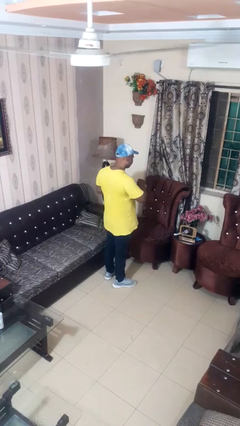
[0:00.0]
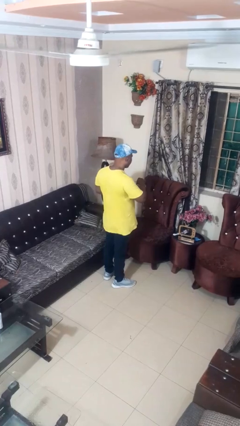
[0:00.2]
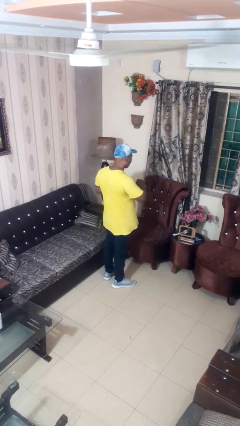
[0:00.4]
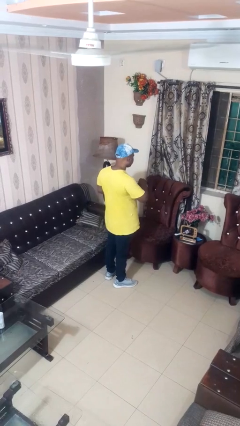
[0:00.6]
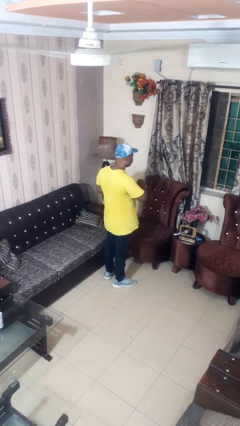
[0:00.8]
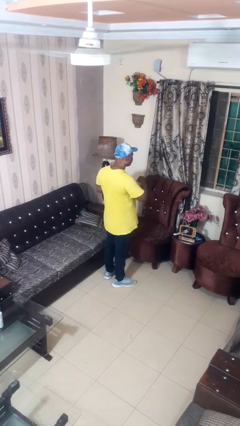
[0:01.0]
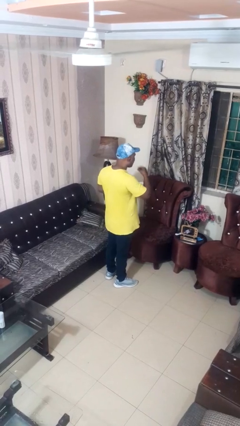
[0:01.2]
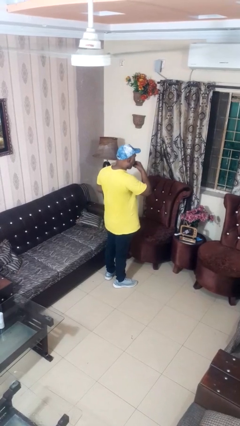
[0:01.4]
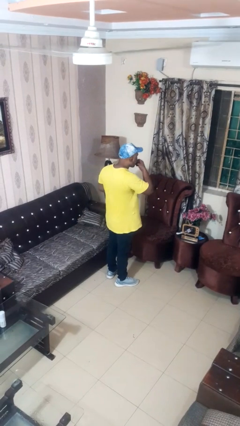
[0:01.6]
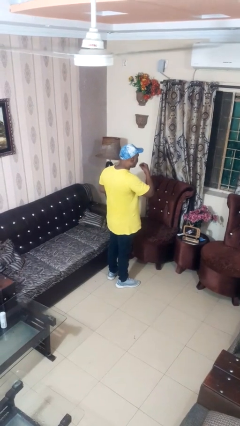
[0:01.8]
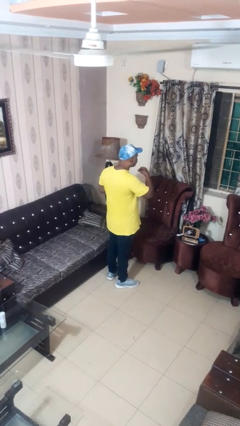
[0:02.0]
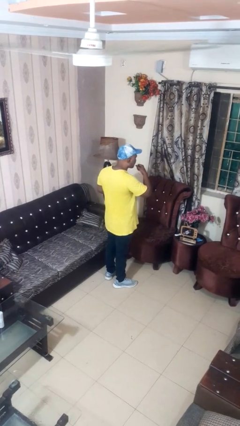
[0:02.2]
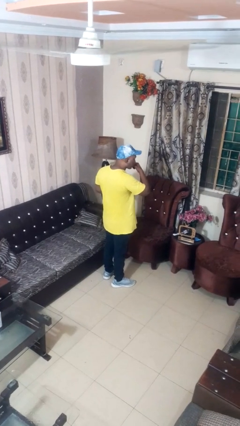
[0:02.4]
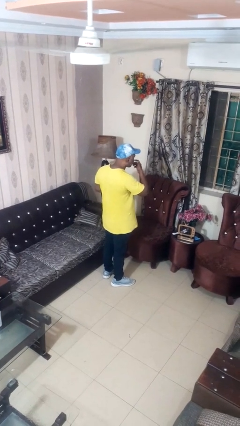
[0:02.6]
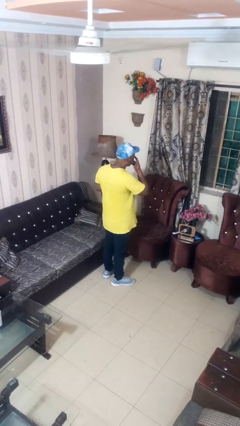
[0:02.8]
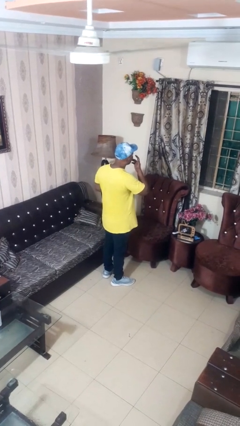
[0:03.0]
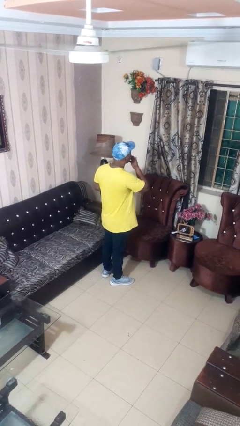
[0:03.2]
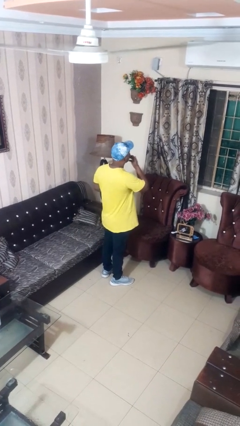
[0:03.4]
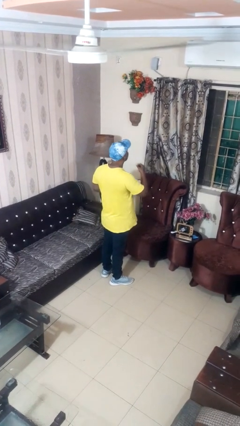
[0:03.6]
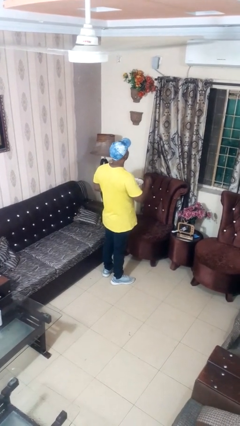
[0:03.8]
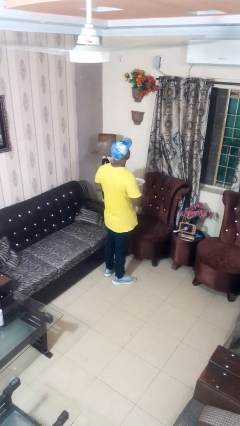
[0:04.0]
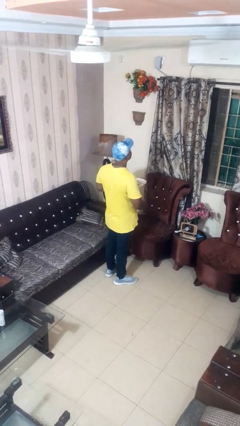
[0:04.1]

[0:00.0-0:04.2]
person licks fingers

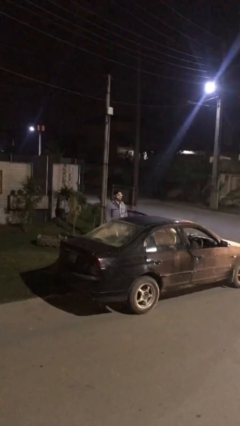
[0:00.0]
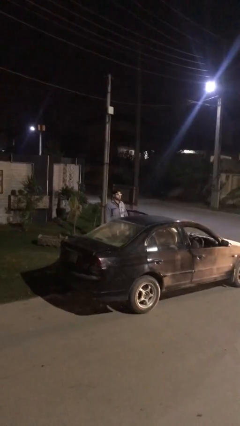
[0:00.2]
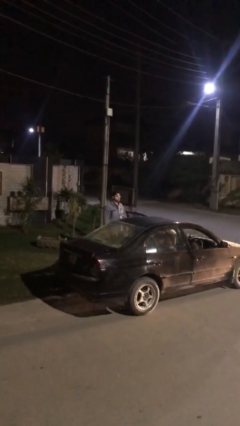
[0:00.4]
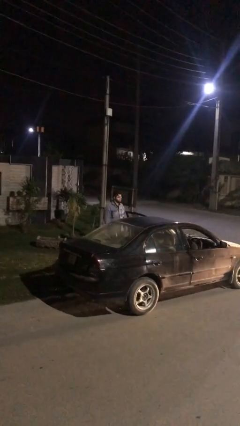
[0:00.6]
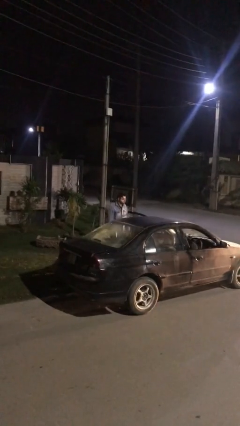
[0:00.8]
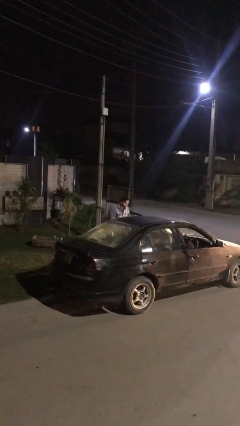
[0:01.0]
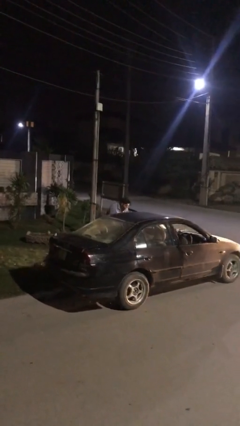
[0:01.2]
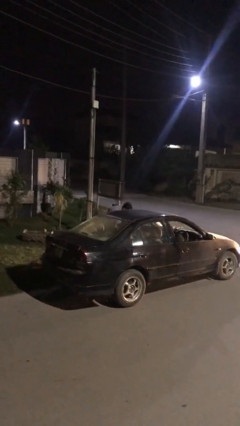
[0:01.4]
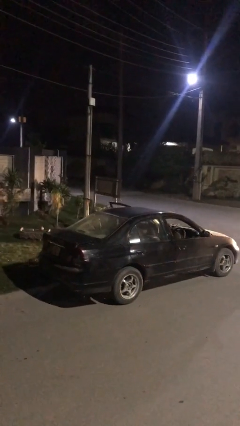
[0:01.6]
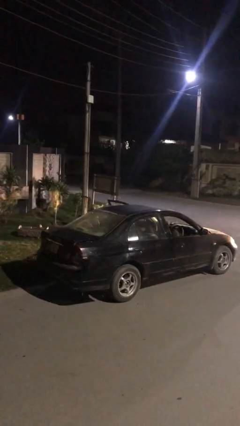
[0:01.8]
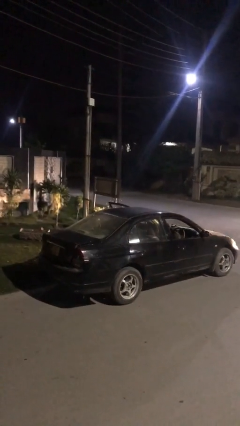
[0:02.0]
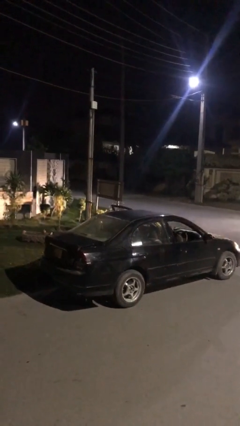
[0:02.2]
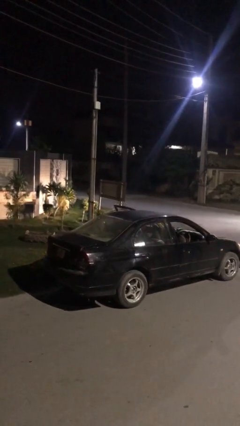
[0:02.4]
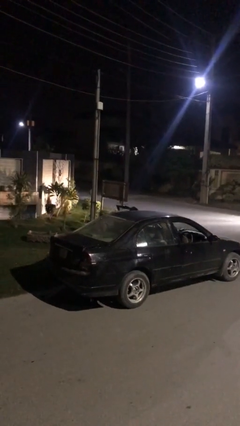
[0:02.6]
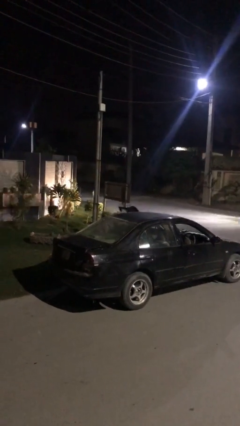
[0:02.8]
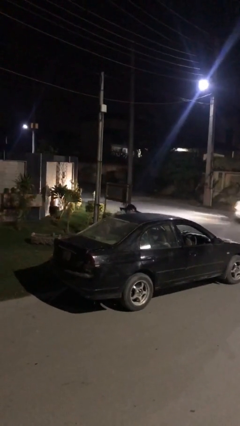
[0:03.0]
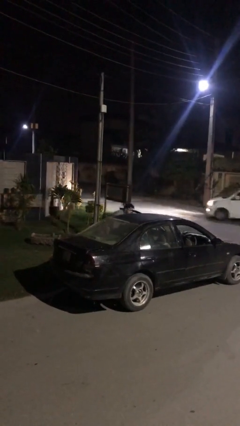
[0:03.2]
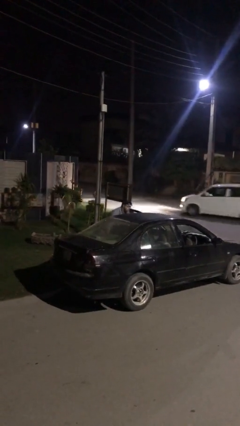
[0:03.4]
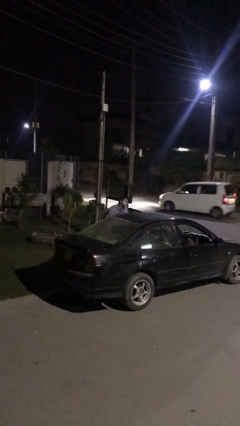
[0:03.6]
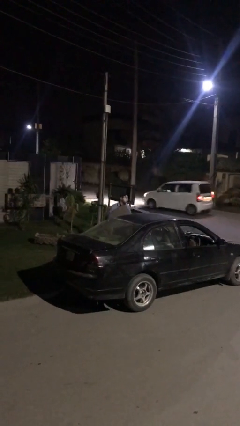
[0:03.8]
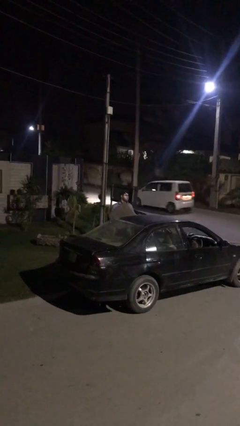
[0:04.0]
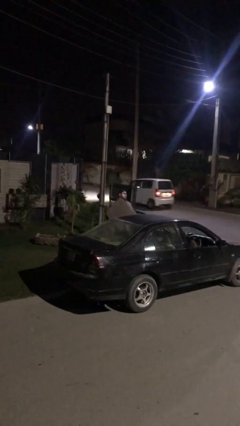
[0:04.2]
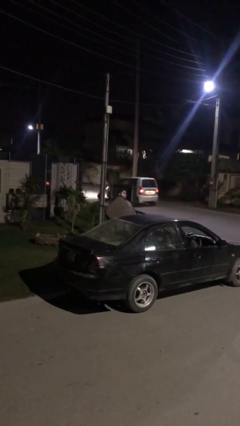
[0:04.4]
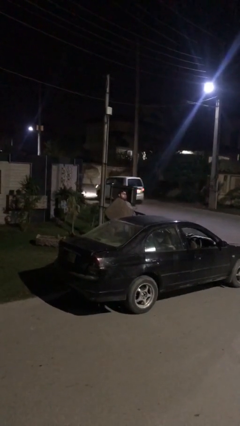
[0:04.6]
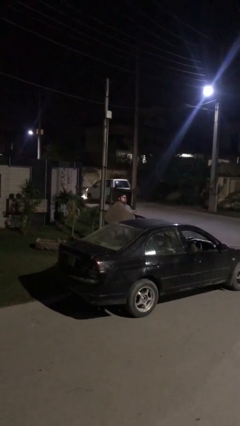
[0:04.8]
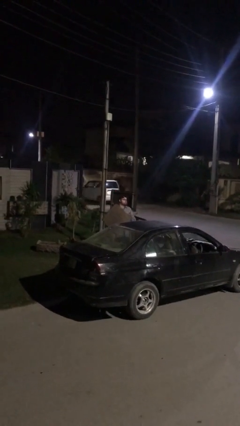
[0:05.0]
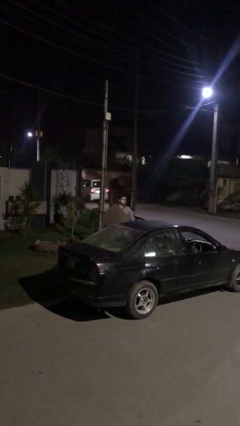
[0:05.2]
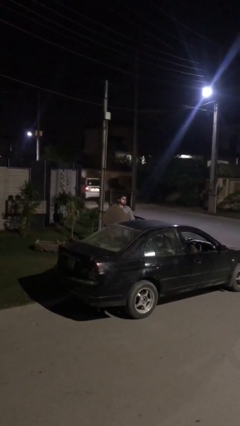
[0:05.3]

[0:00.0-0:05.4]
person unloads car

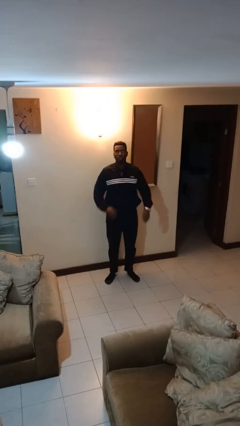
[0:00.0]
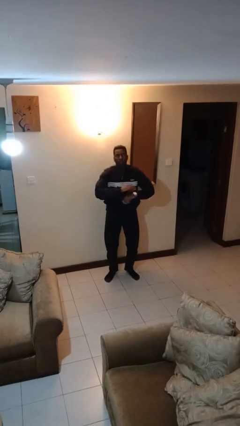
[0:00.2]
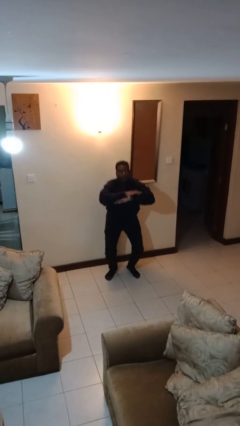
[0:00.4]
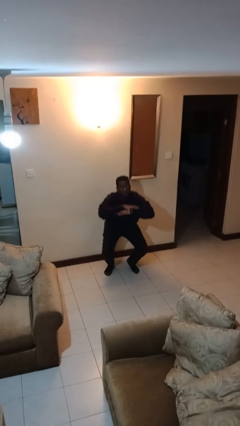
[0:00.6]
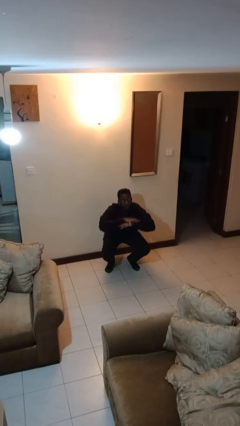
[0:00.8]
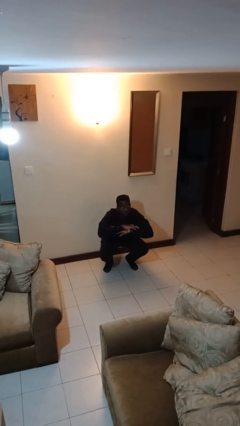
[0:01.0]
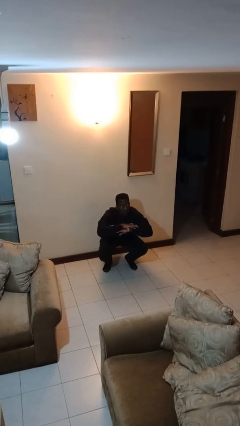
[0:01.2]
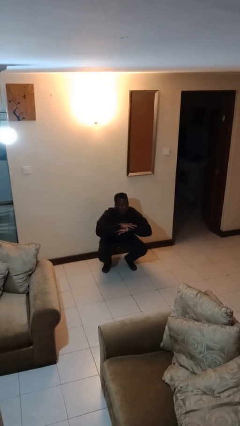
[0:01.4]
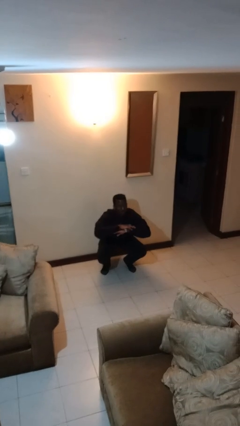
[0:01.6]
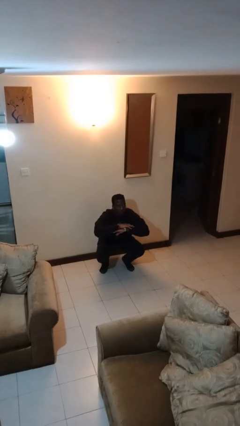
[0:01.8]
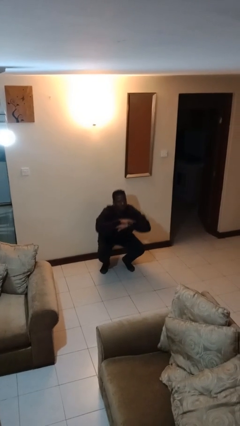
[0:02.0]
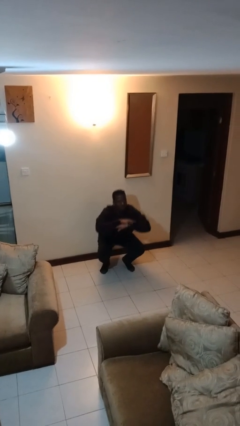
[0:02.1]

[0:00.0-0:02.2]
person squats

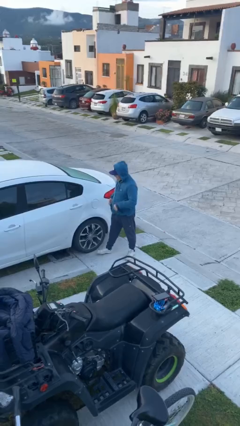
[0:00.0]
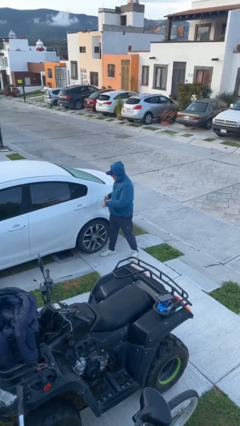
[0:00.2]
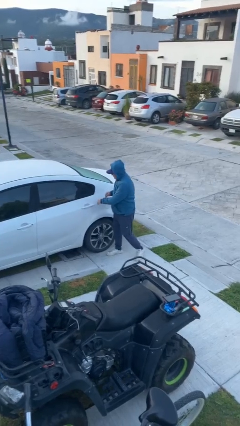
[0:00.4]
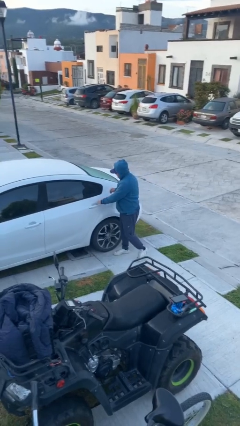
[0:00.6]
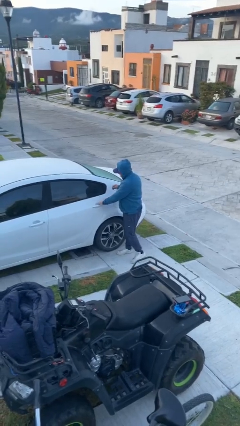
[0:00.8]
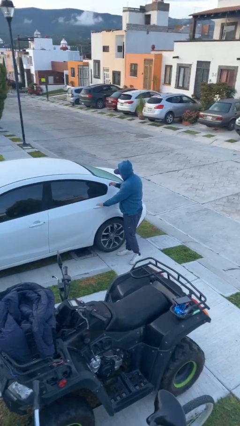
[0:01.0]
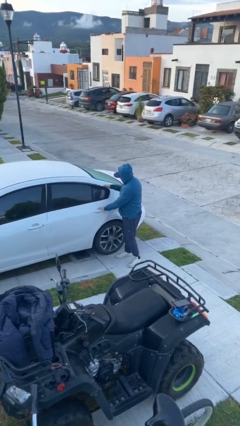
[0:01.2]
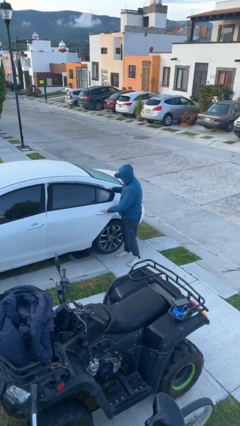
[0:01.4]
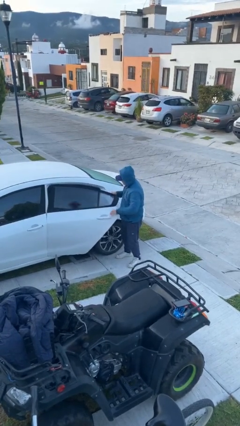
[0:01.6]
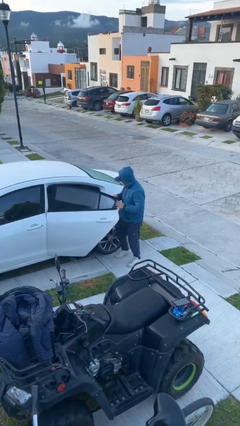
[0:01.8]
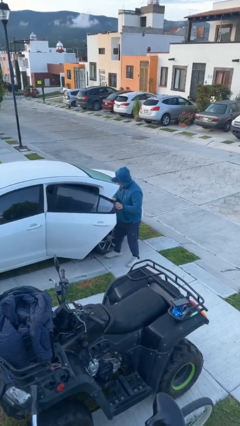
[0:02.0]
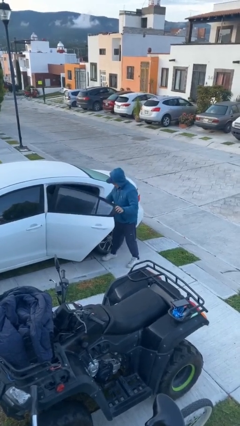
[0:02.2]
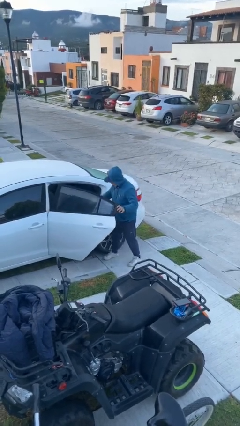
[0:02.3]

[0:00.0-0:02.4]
person opens car door

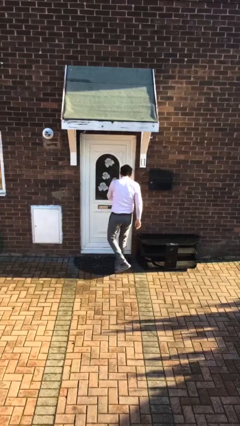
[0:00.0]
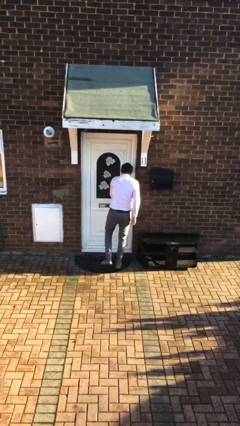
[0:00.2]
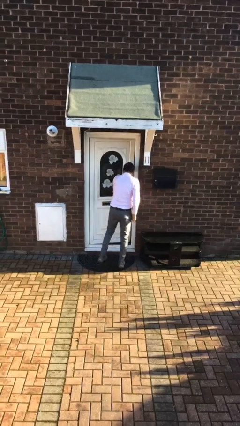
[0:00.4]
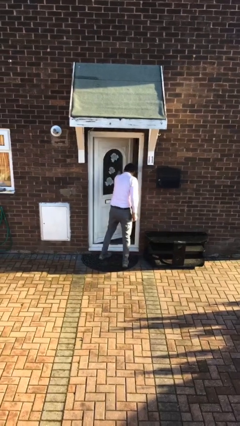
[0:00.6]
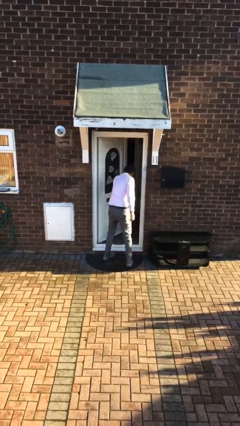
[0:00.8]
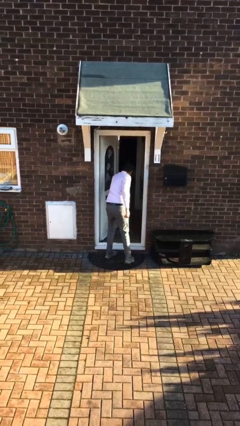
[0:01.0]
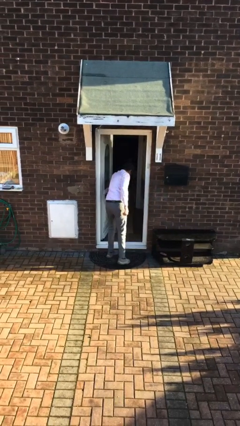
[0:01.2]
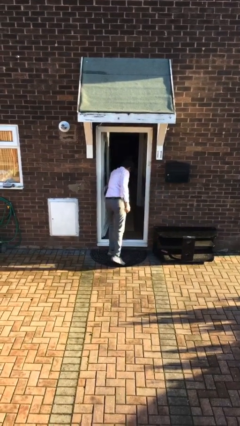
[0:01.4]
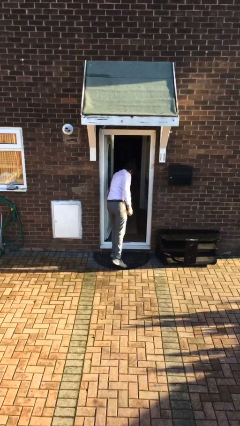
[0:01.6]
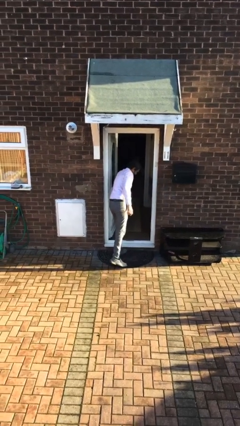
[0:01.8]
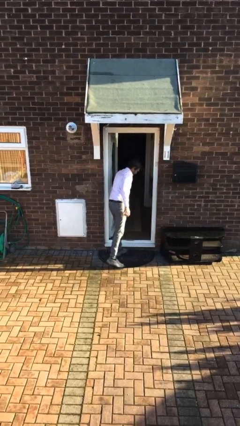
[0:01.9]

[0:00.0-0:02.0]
person opens facility door

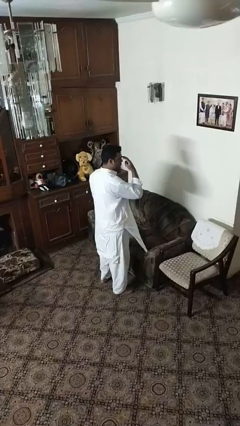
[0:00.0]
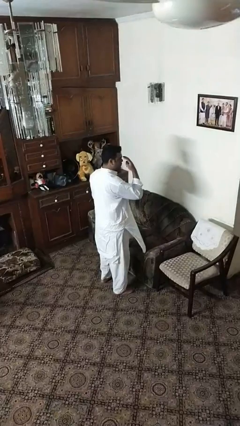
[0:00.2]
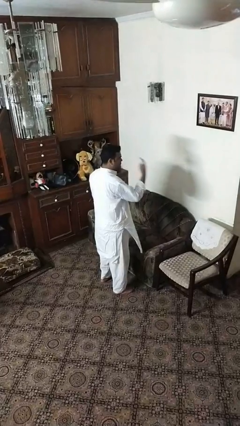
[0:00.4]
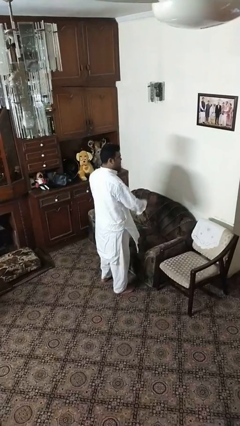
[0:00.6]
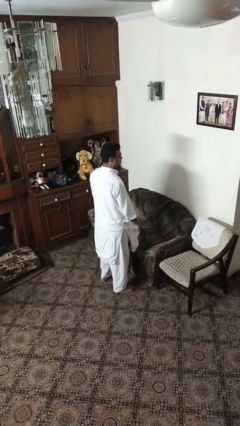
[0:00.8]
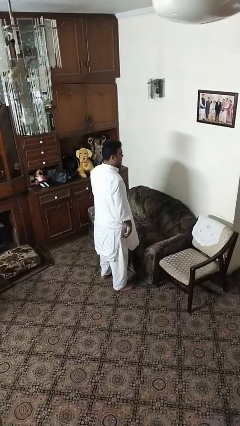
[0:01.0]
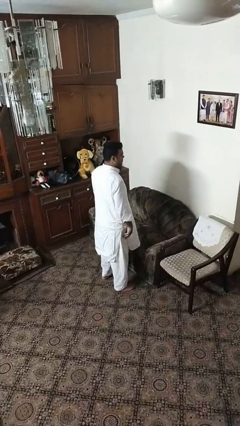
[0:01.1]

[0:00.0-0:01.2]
person gestures watch closely
